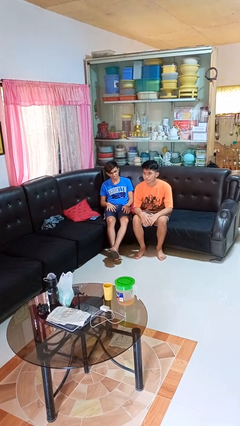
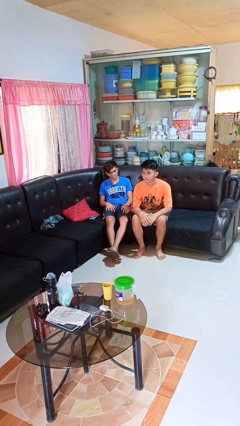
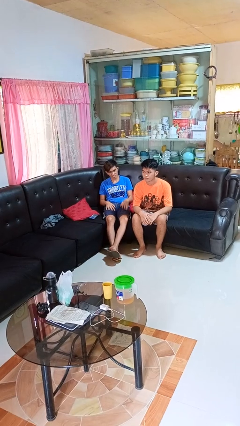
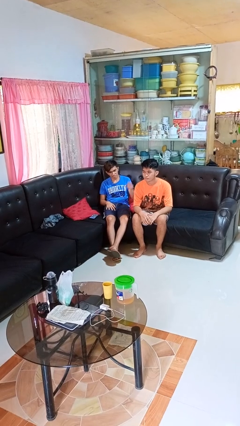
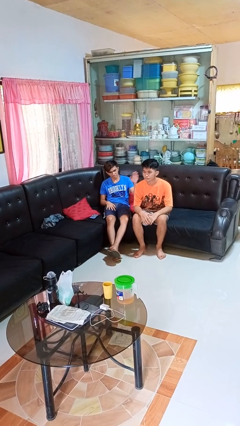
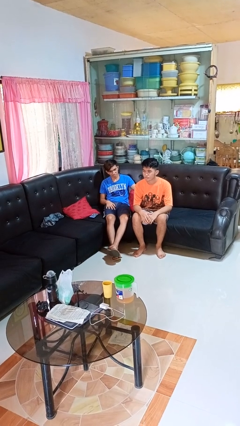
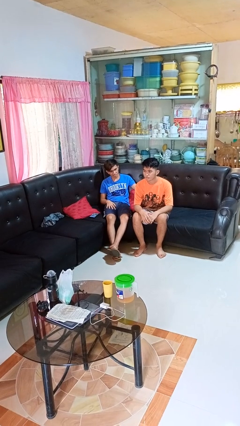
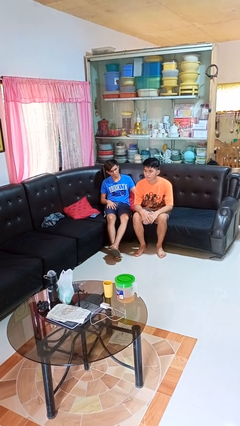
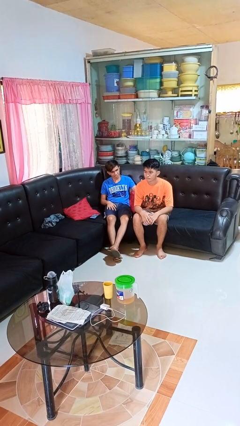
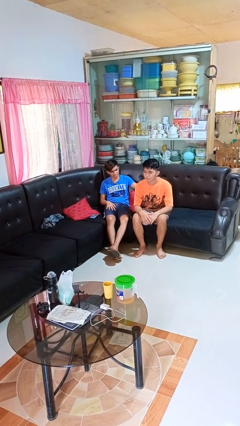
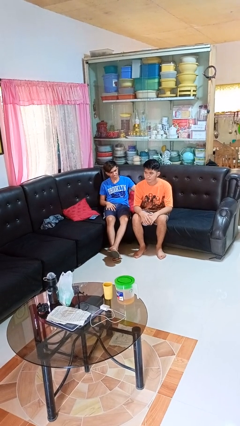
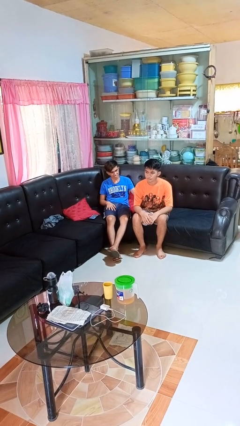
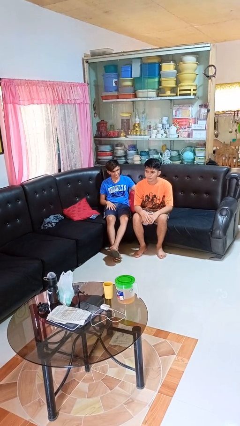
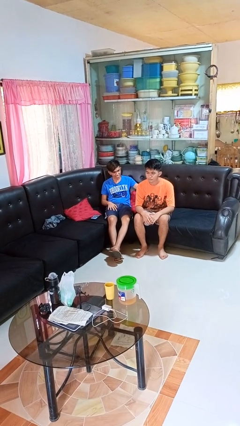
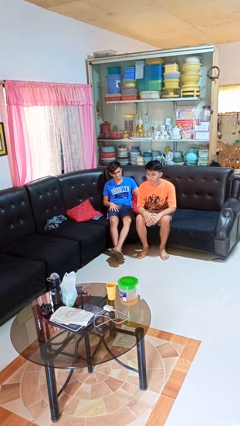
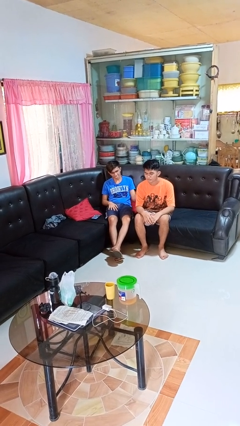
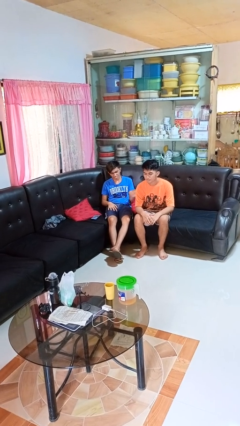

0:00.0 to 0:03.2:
person touches back of person

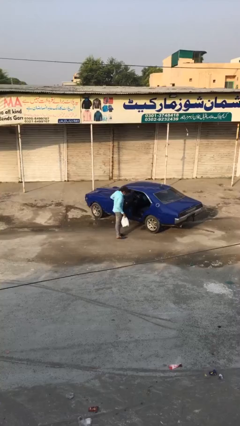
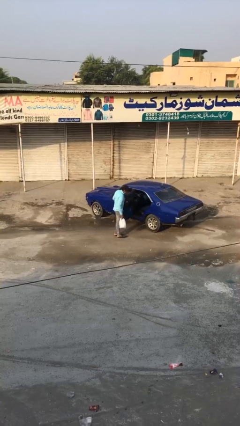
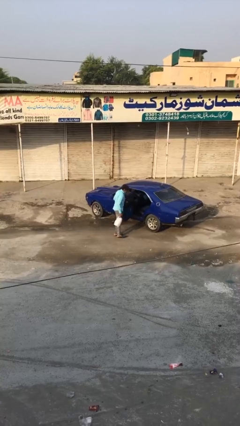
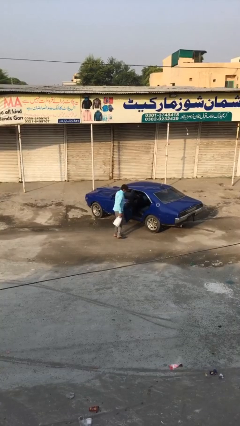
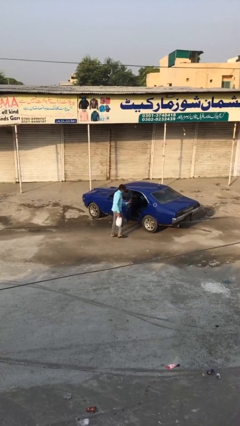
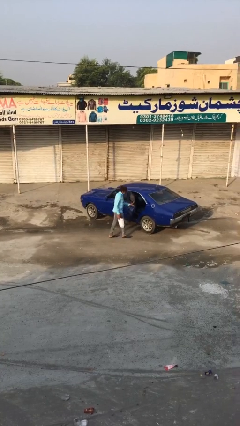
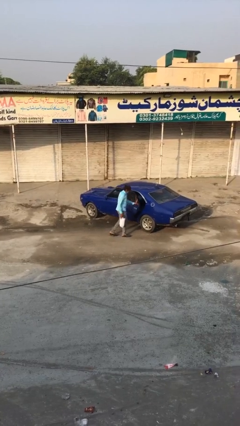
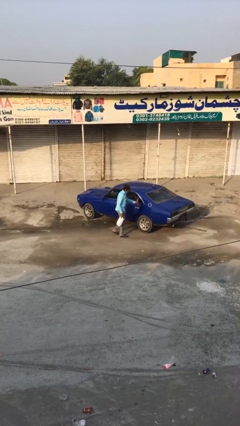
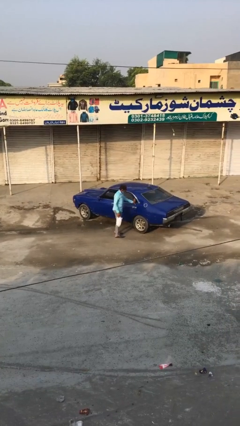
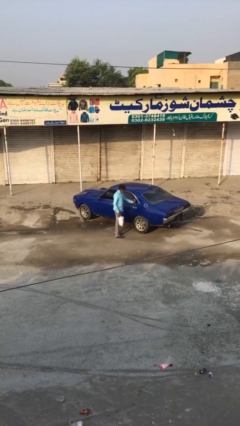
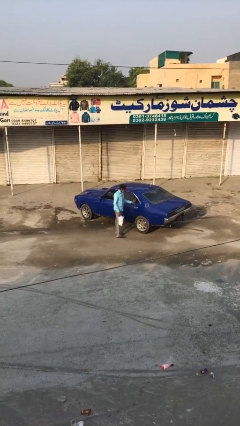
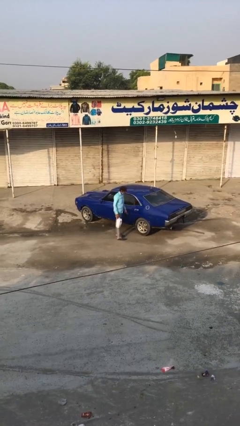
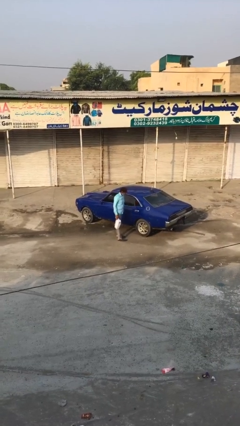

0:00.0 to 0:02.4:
person closes car door

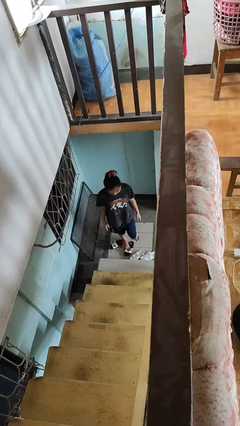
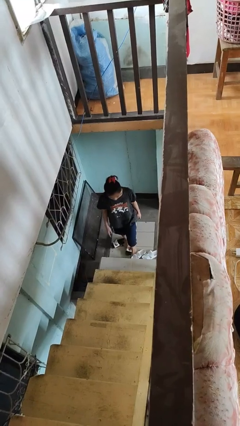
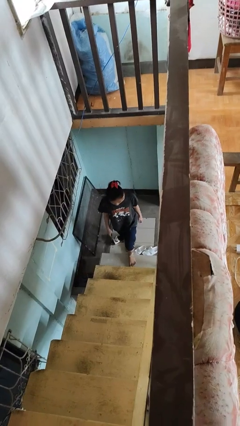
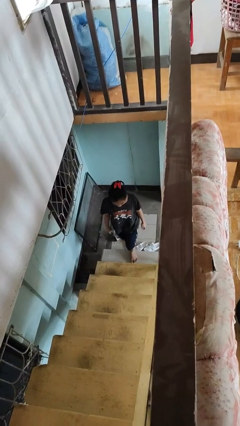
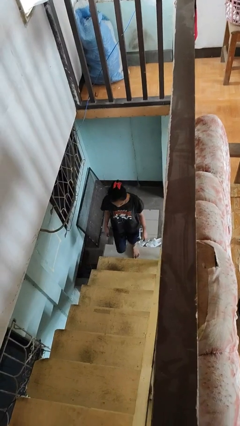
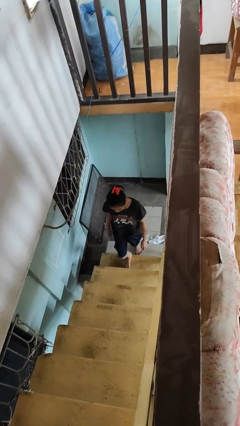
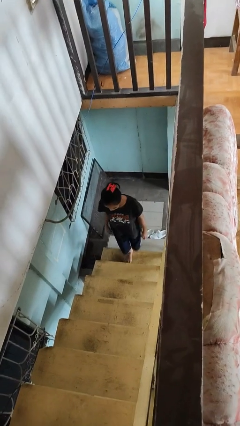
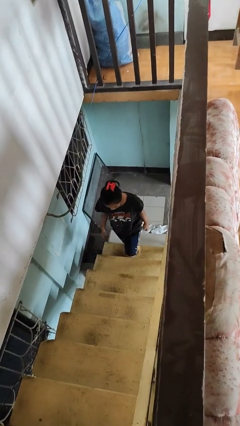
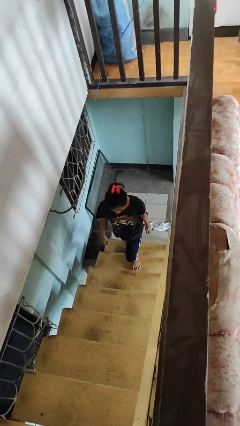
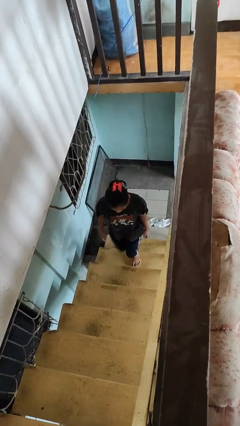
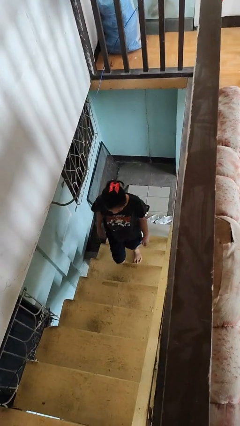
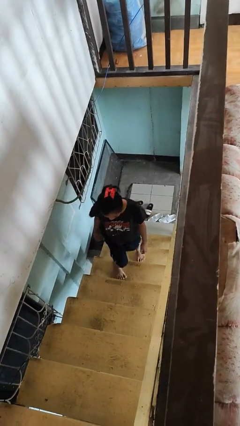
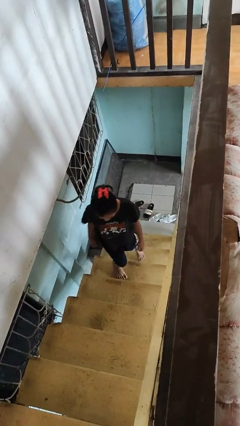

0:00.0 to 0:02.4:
person climbs up stairs

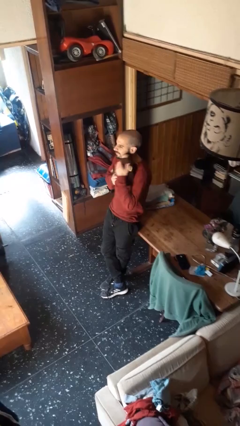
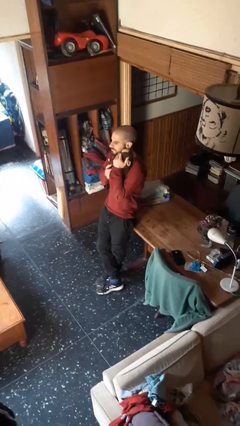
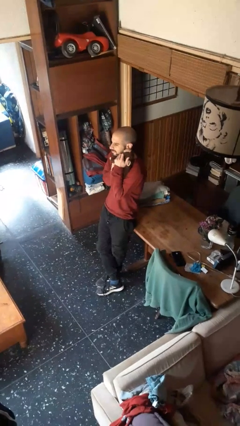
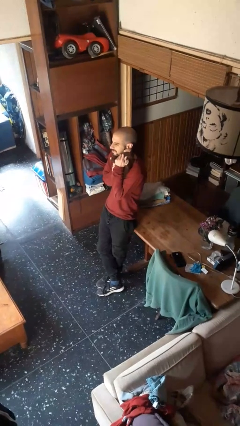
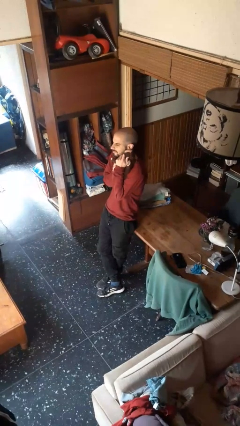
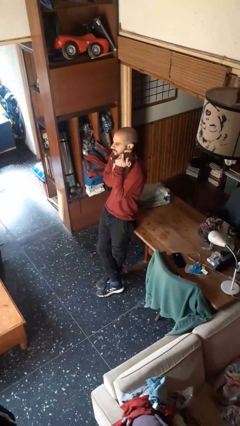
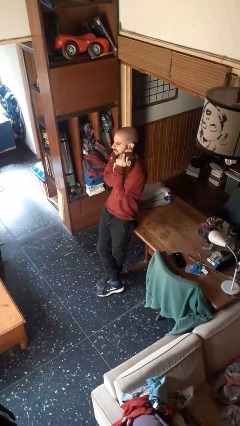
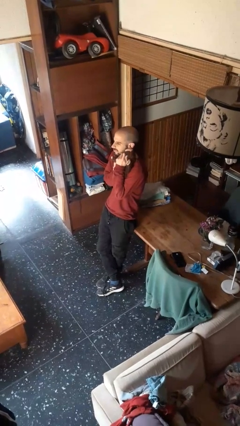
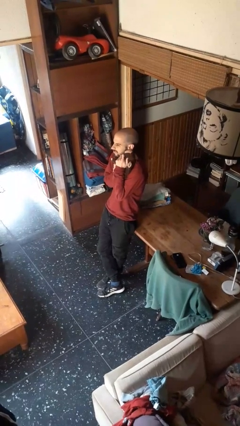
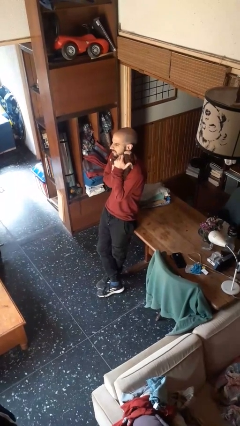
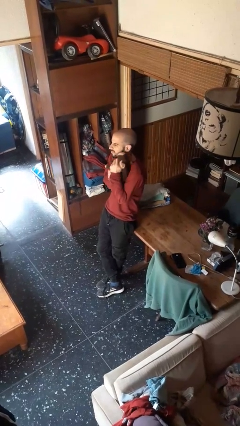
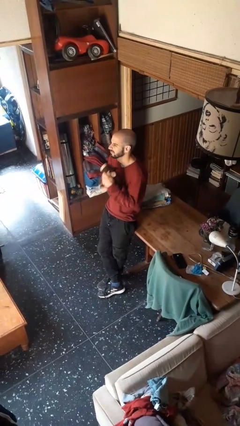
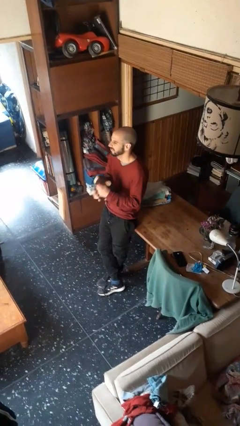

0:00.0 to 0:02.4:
person hugs stuffed animal

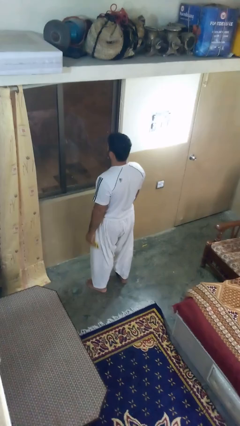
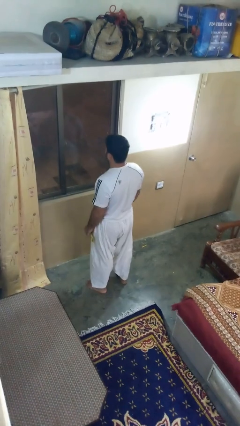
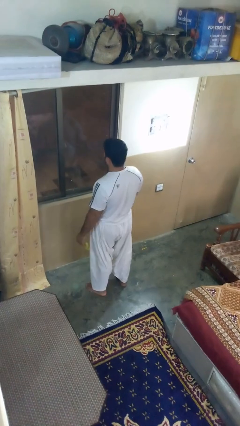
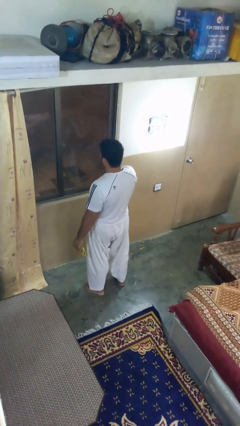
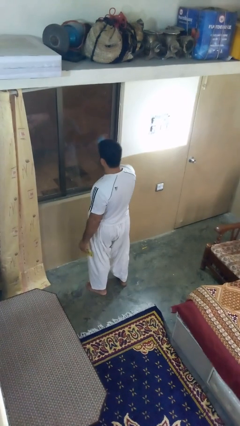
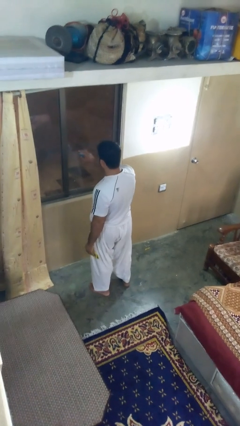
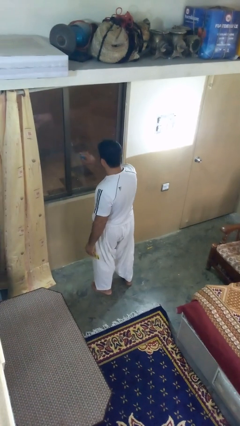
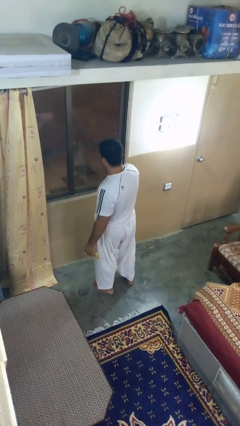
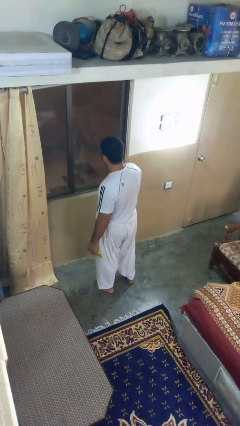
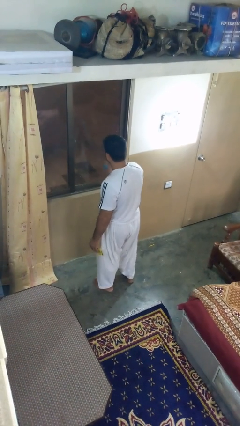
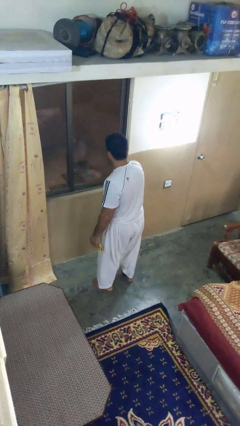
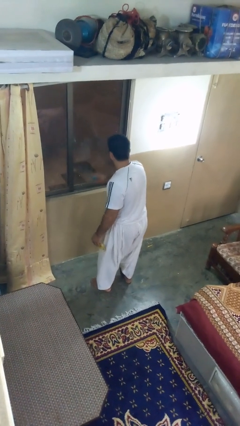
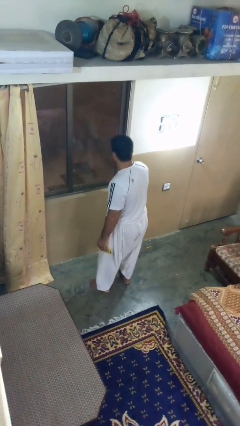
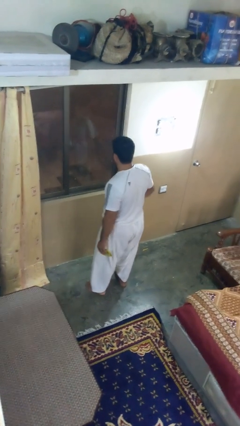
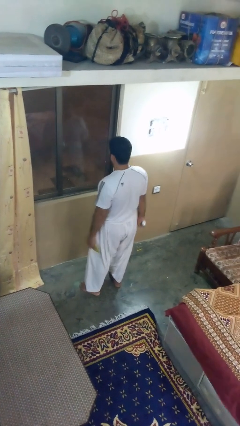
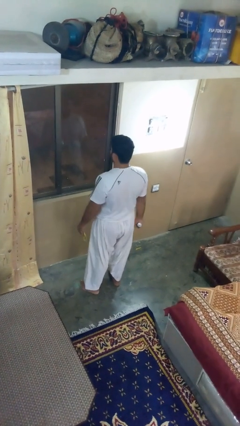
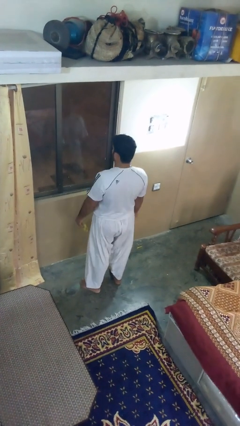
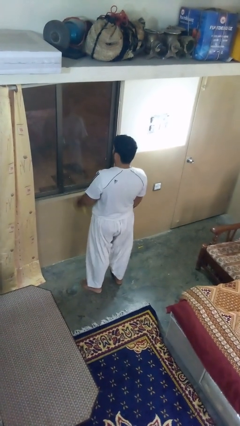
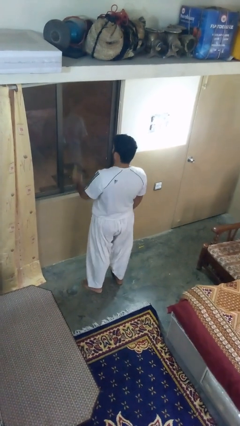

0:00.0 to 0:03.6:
person sprays from bottle

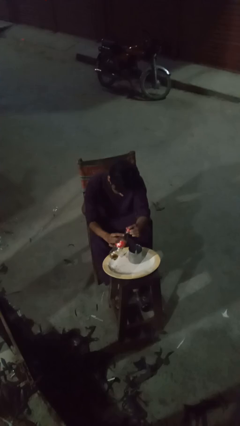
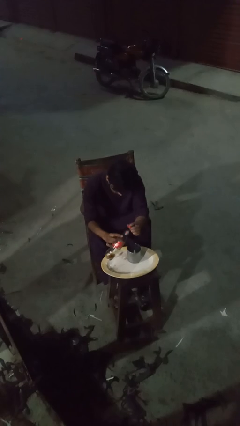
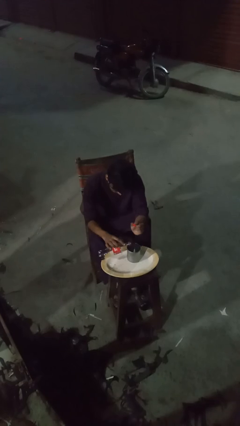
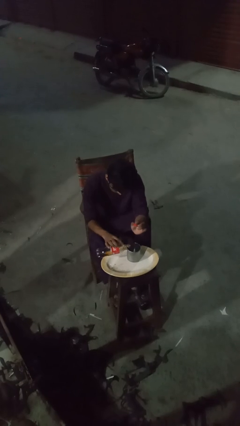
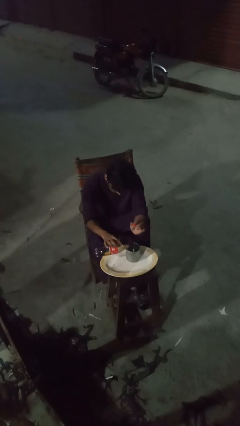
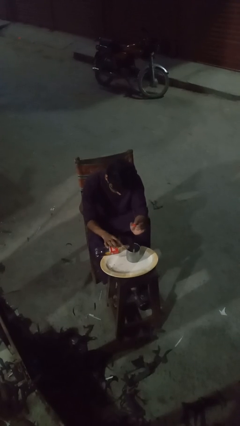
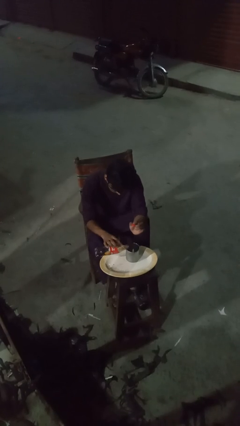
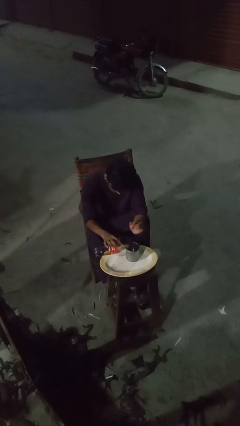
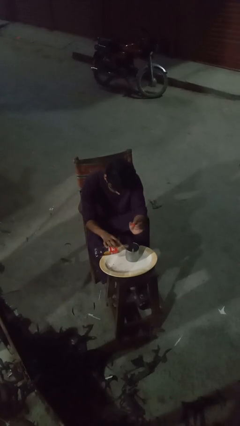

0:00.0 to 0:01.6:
person pours liquid into cup

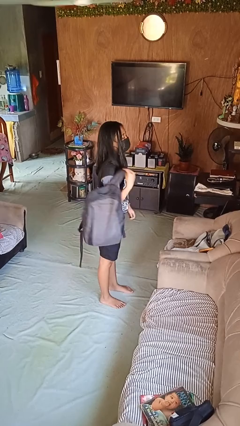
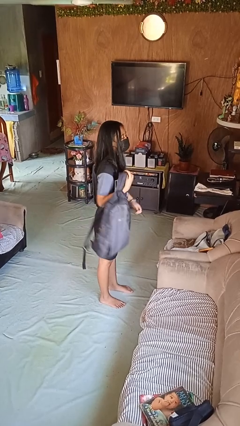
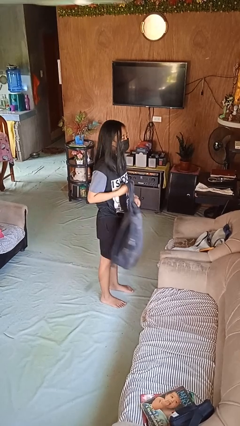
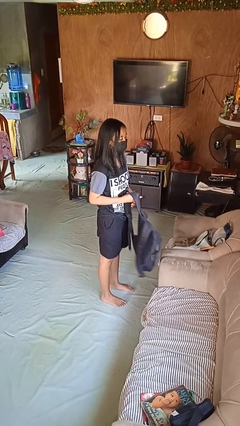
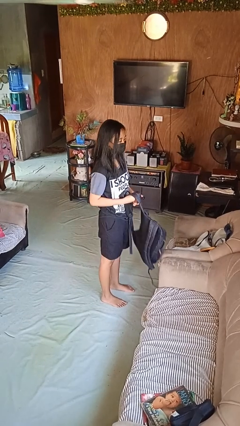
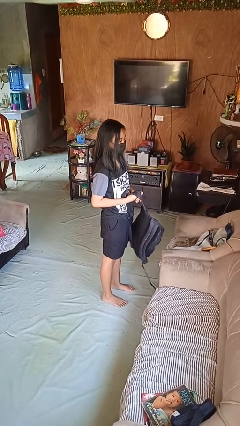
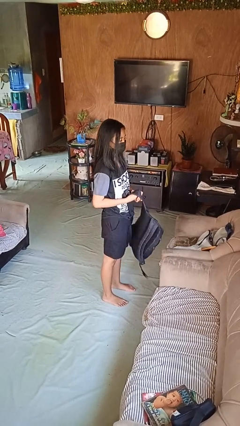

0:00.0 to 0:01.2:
person takes off backpack

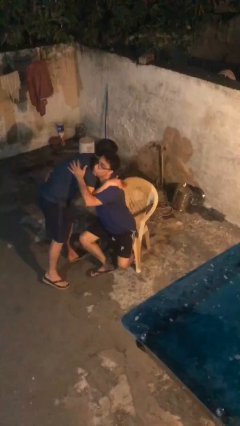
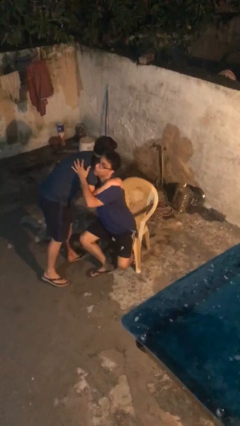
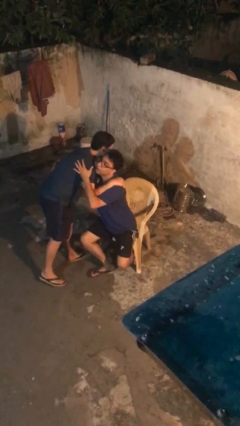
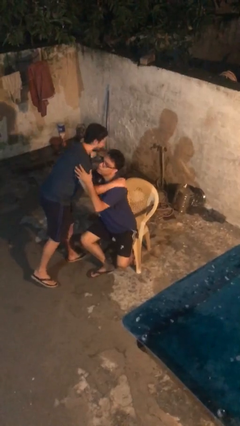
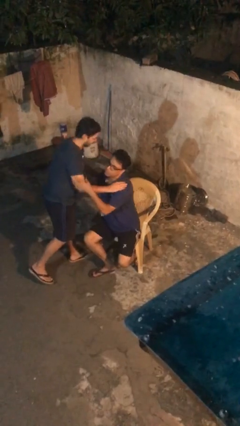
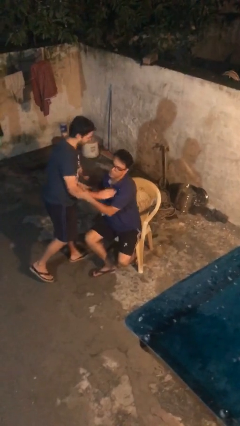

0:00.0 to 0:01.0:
person embraces person
